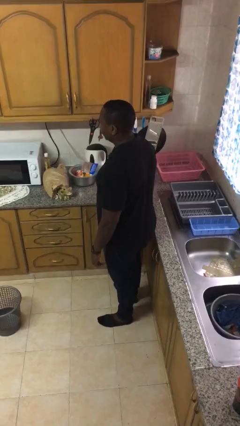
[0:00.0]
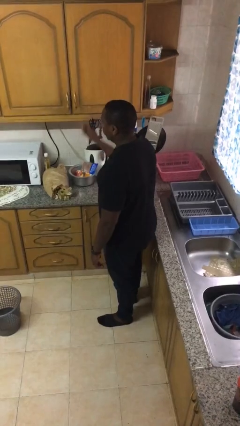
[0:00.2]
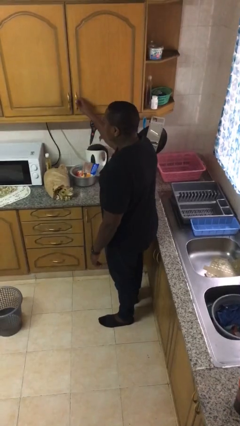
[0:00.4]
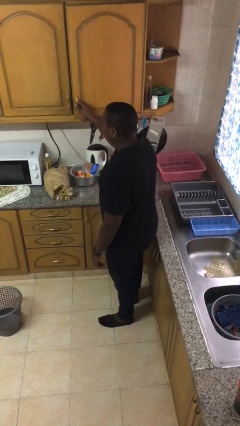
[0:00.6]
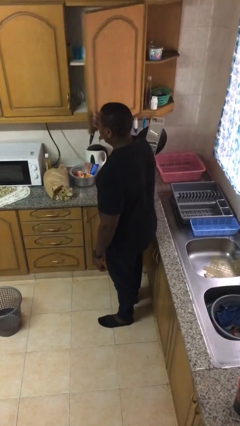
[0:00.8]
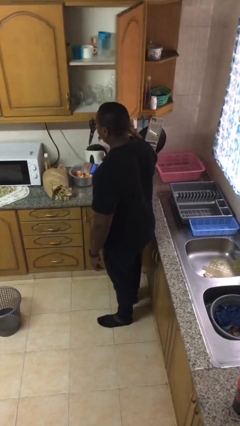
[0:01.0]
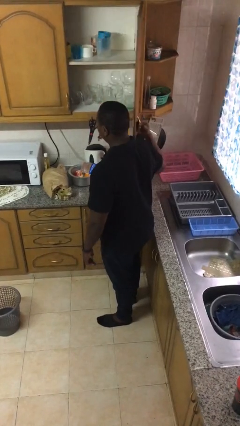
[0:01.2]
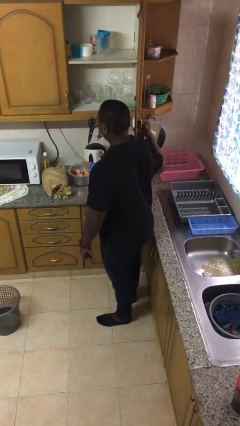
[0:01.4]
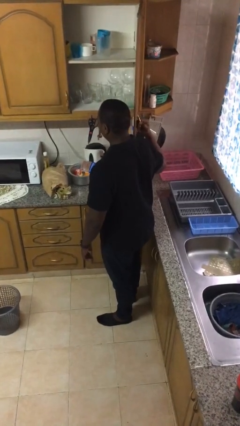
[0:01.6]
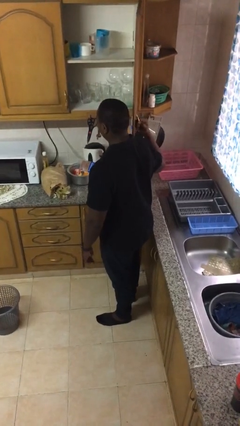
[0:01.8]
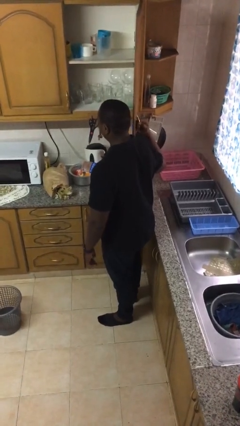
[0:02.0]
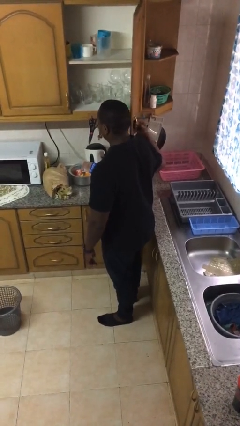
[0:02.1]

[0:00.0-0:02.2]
person opens cabinet

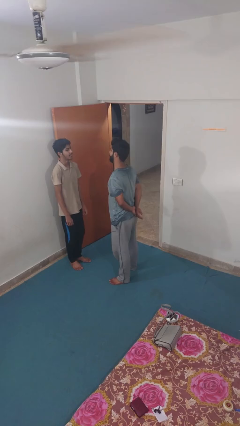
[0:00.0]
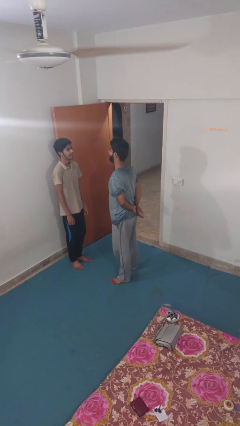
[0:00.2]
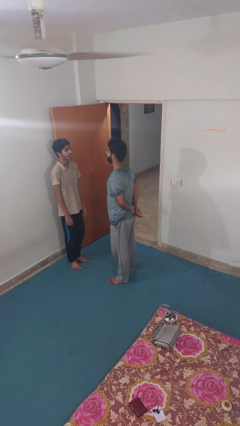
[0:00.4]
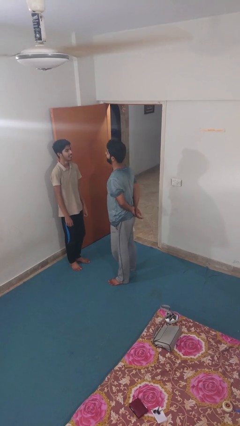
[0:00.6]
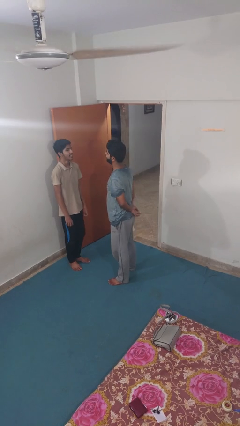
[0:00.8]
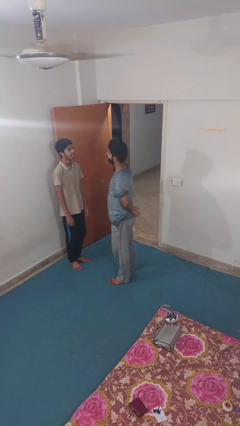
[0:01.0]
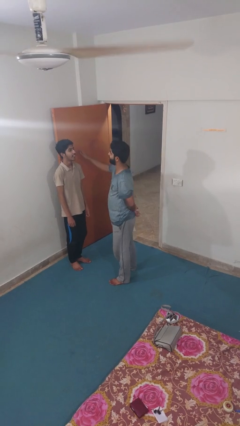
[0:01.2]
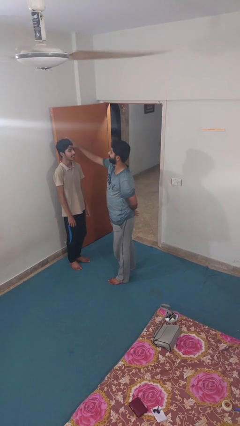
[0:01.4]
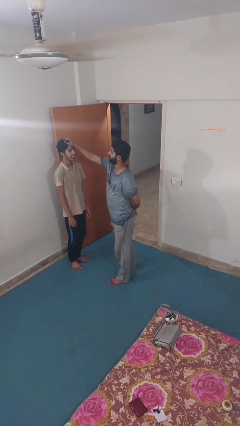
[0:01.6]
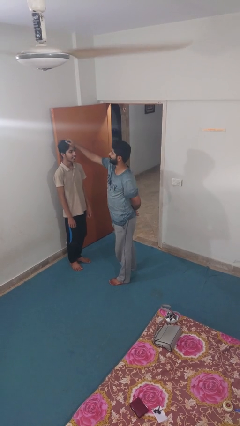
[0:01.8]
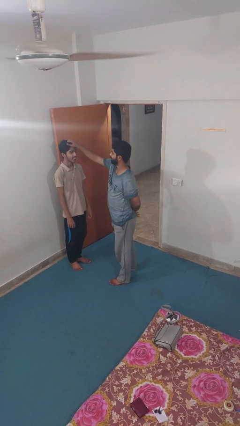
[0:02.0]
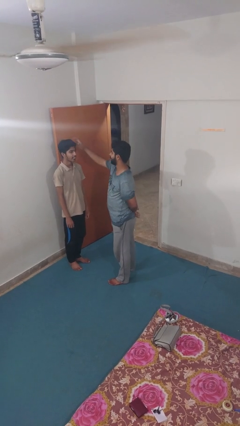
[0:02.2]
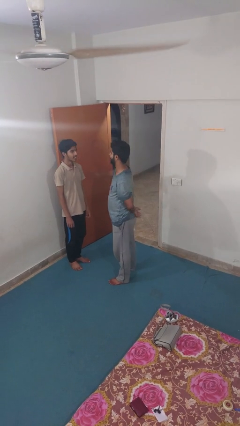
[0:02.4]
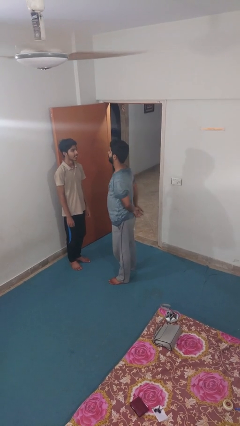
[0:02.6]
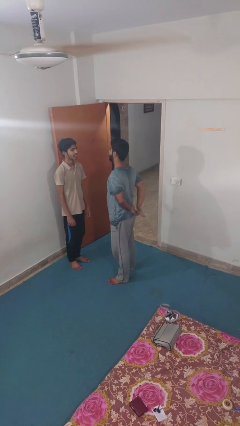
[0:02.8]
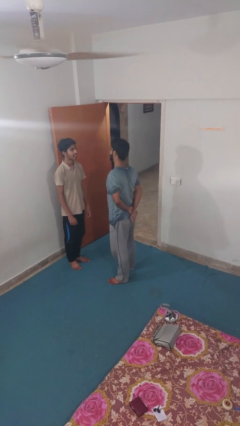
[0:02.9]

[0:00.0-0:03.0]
person grabs person by hair

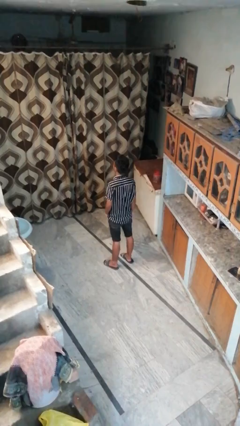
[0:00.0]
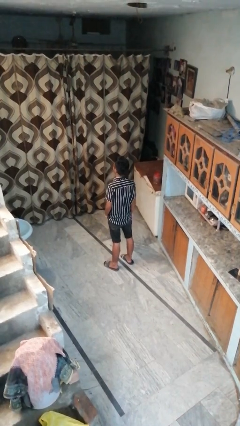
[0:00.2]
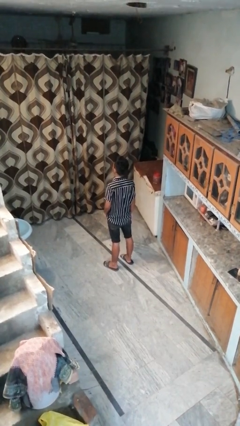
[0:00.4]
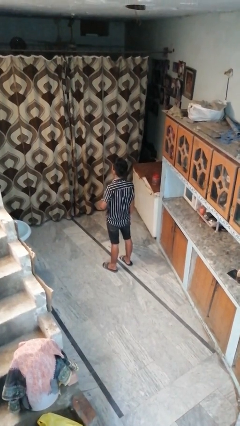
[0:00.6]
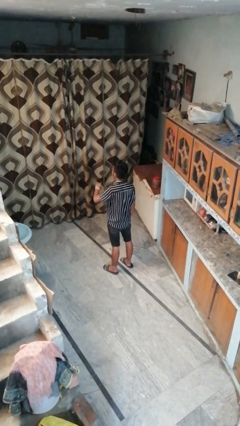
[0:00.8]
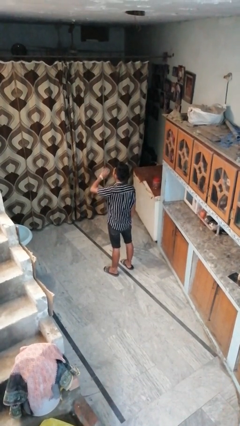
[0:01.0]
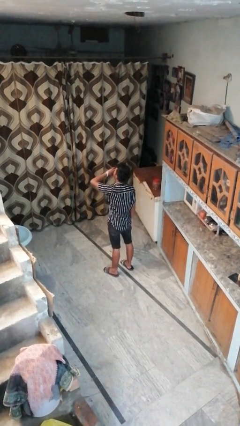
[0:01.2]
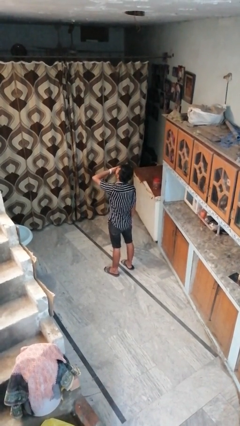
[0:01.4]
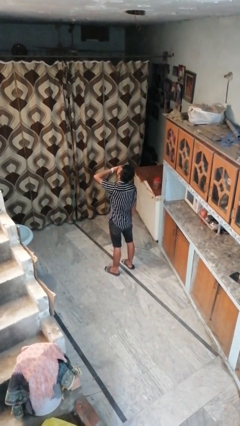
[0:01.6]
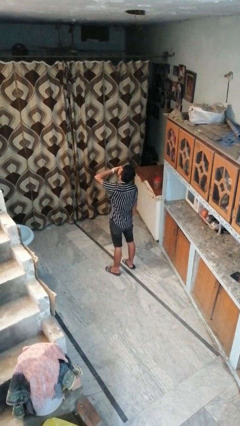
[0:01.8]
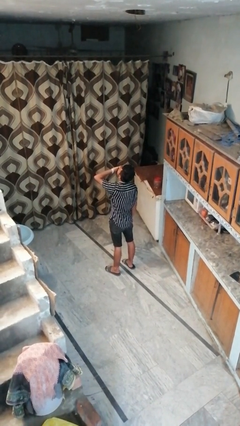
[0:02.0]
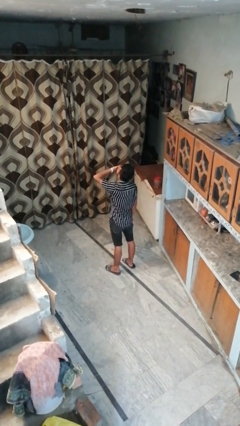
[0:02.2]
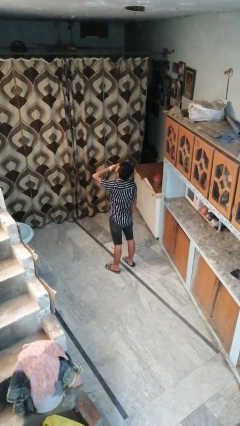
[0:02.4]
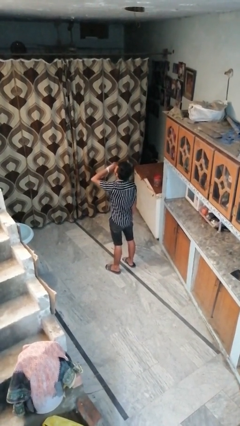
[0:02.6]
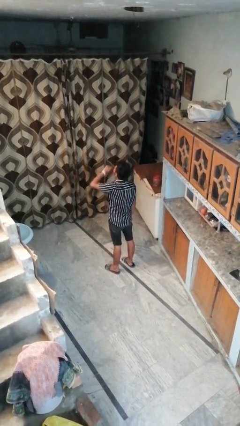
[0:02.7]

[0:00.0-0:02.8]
person yawns

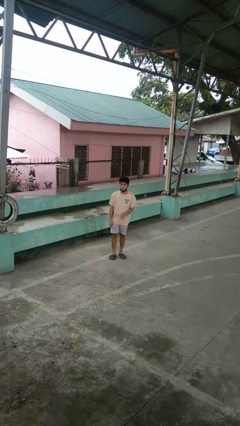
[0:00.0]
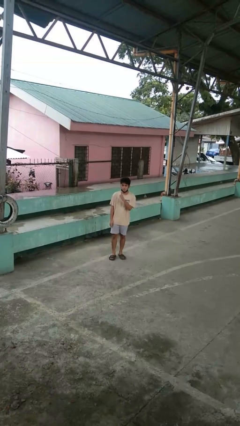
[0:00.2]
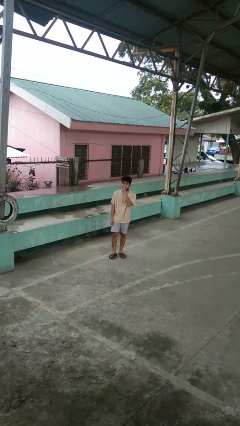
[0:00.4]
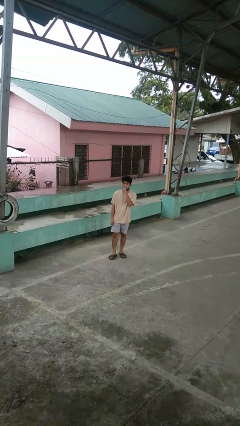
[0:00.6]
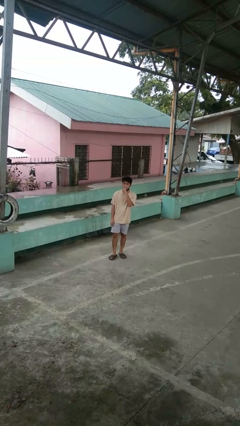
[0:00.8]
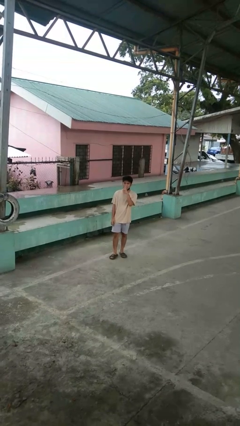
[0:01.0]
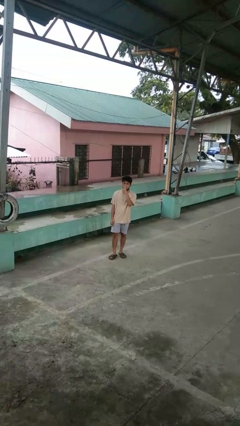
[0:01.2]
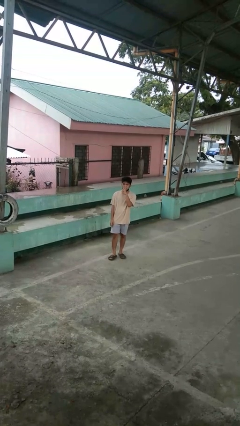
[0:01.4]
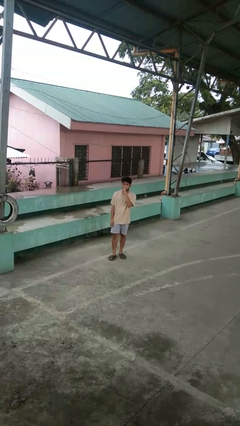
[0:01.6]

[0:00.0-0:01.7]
person gestures be quiet

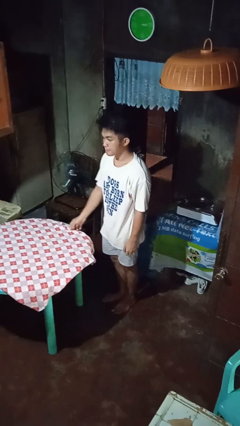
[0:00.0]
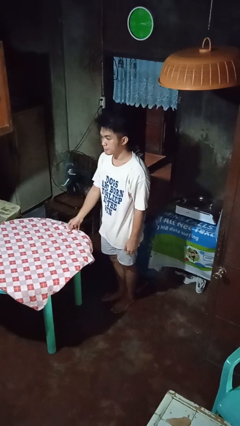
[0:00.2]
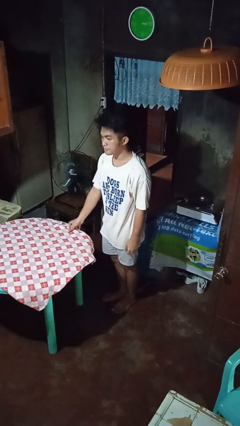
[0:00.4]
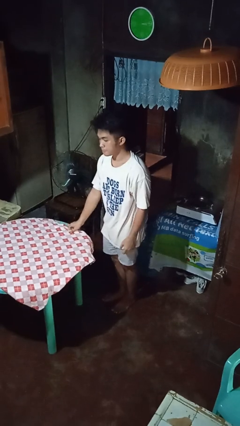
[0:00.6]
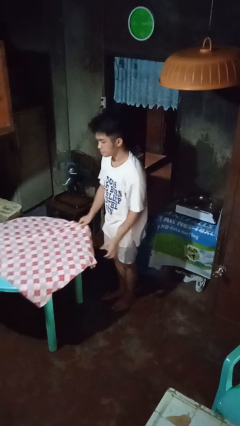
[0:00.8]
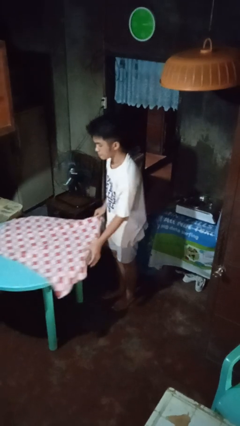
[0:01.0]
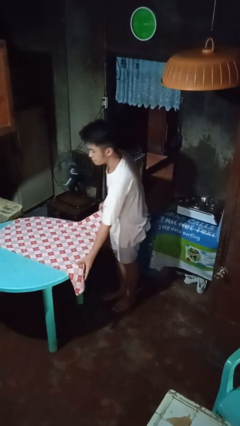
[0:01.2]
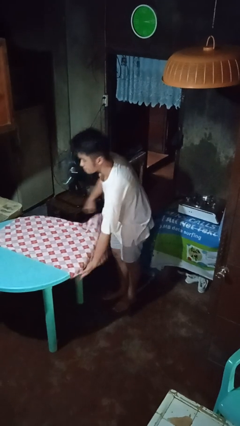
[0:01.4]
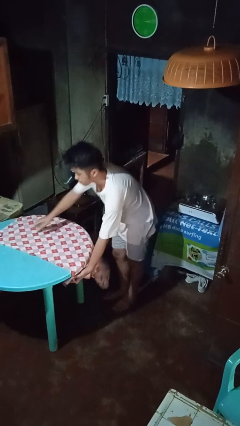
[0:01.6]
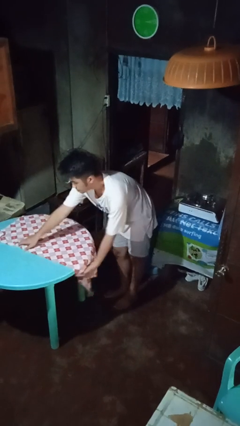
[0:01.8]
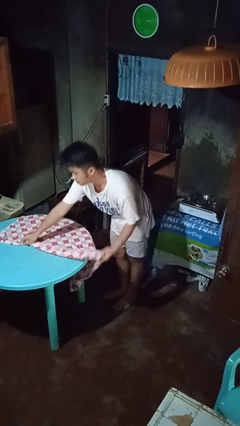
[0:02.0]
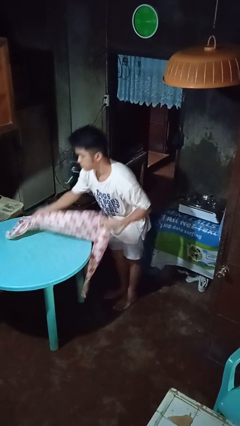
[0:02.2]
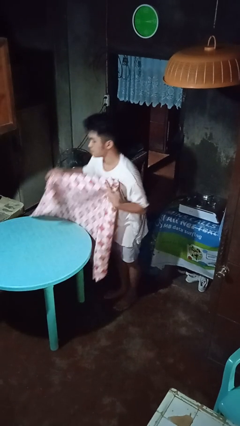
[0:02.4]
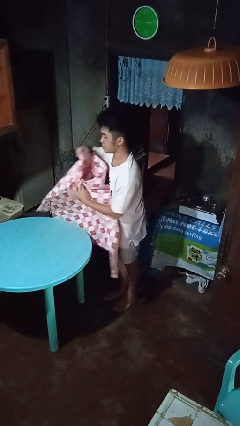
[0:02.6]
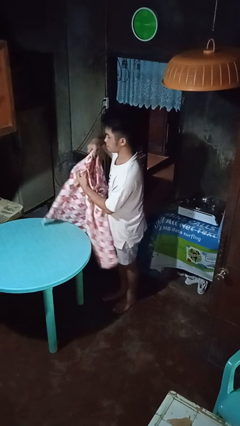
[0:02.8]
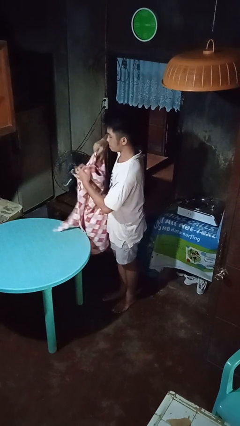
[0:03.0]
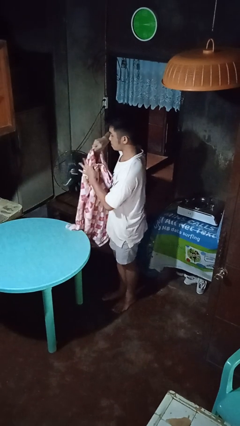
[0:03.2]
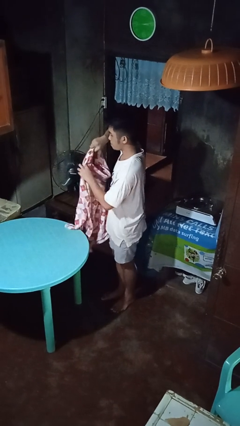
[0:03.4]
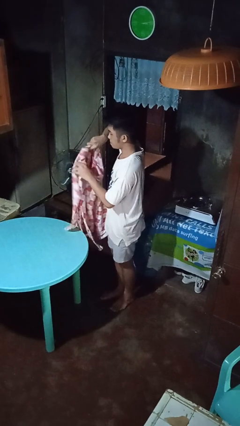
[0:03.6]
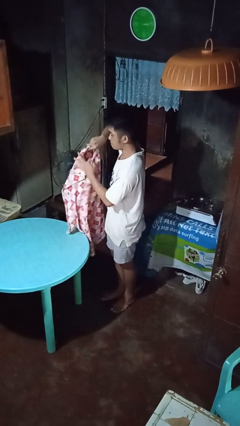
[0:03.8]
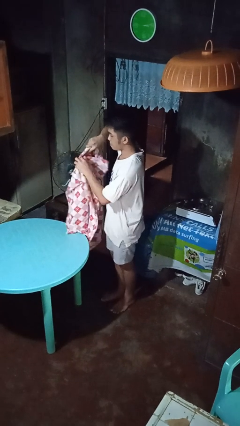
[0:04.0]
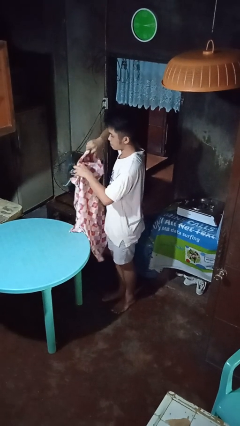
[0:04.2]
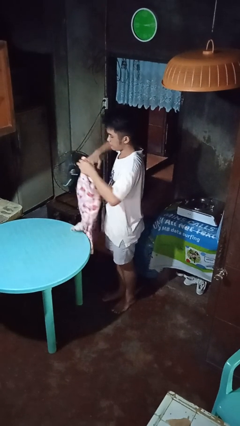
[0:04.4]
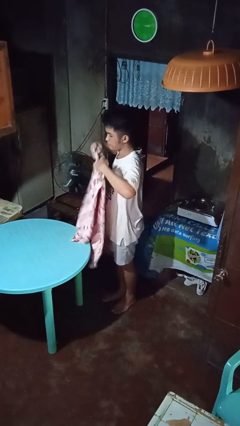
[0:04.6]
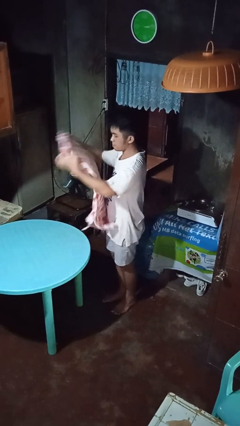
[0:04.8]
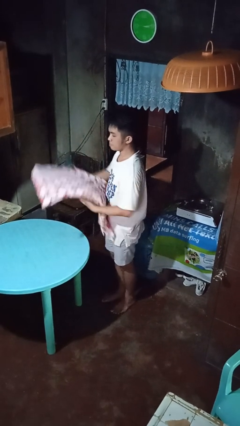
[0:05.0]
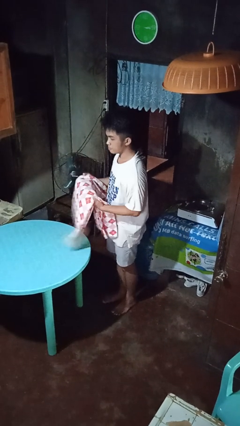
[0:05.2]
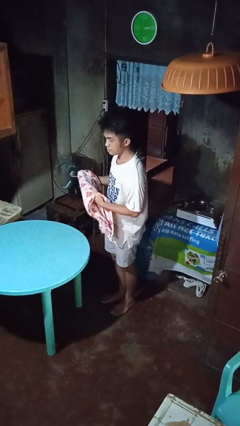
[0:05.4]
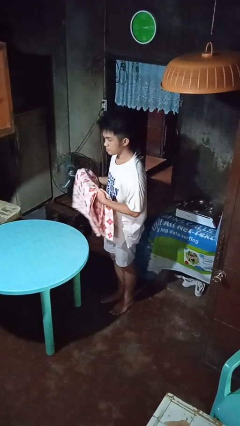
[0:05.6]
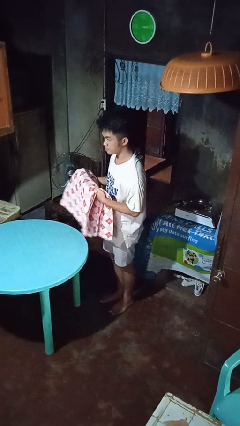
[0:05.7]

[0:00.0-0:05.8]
person folds tablecloth

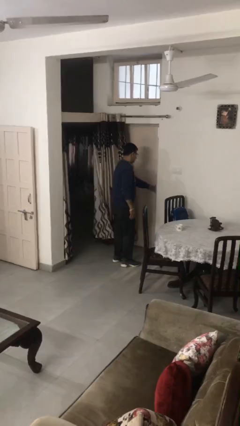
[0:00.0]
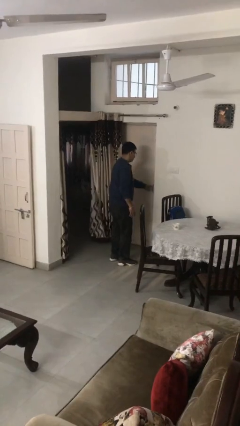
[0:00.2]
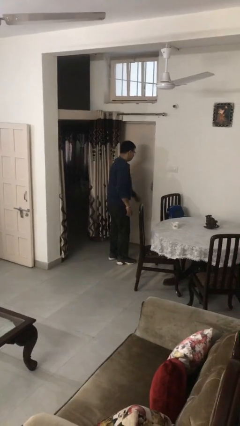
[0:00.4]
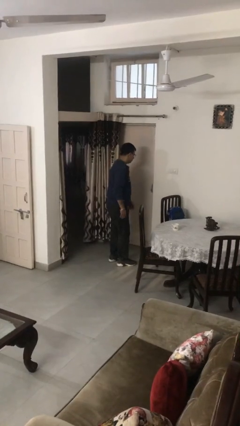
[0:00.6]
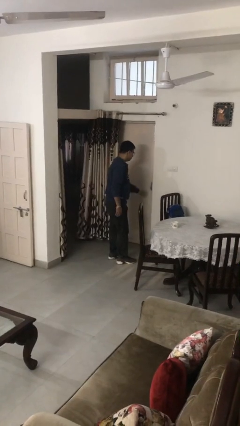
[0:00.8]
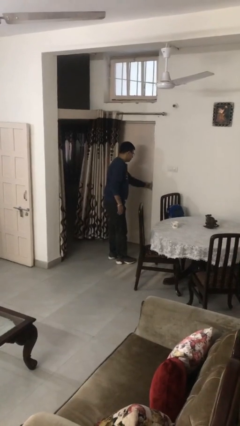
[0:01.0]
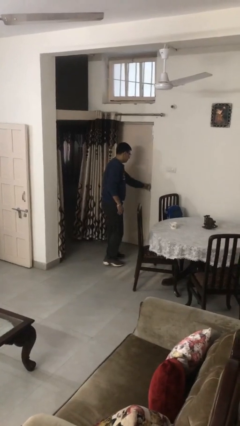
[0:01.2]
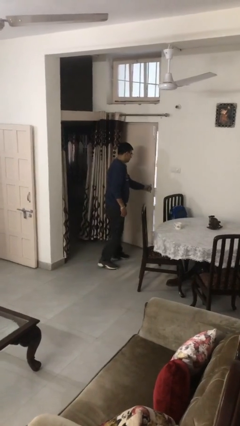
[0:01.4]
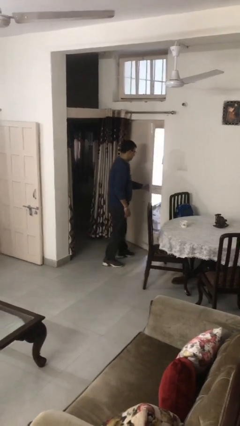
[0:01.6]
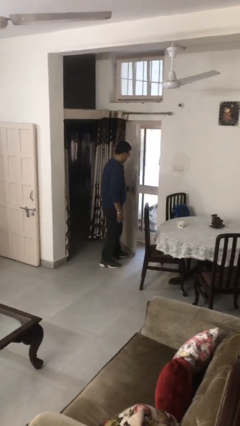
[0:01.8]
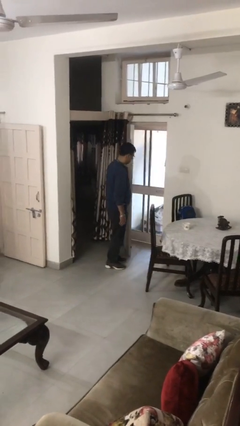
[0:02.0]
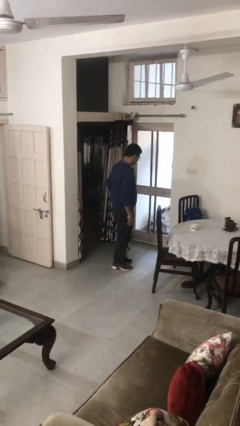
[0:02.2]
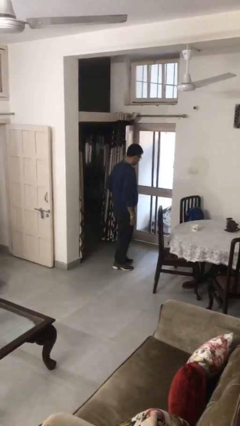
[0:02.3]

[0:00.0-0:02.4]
person opens facility door
